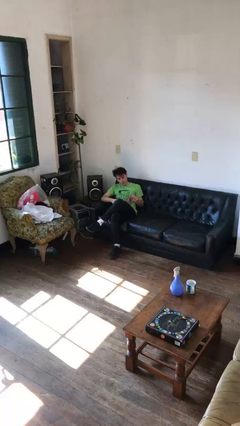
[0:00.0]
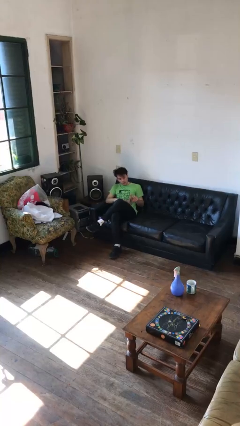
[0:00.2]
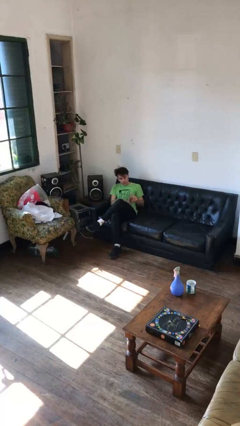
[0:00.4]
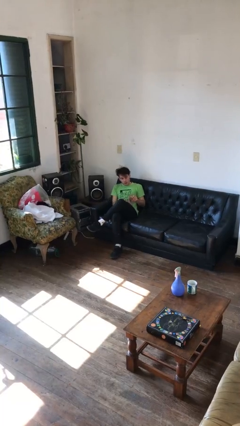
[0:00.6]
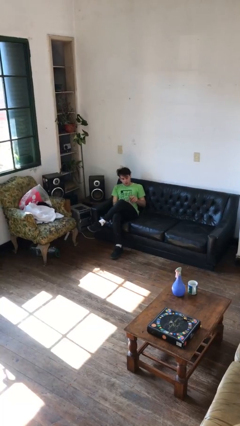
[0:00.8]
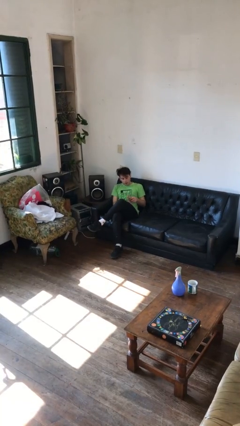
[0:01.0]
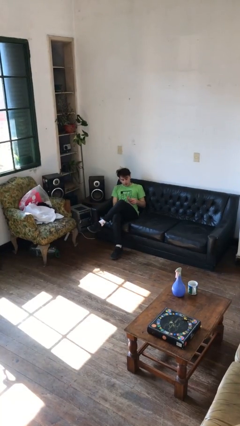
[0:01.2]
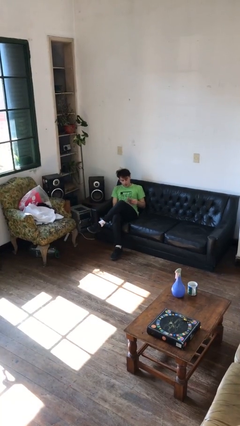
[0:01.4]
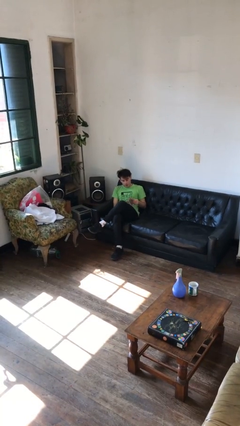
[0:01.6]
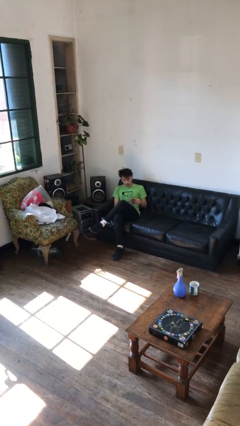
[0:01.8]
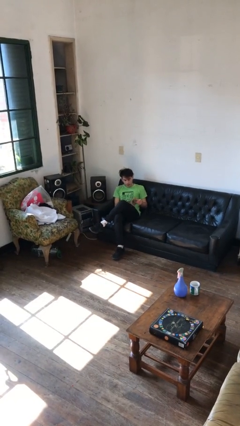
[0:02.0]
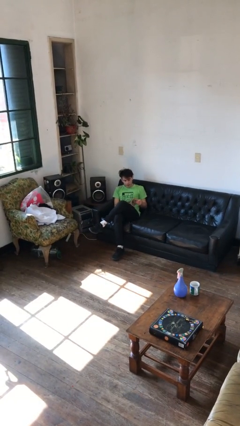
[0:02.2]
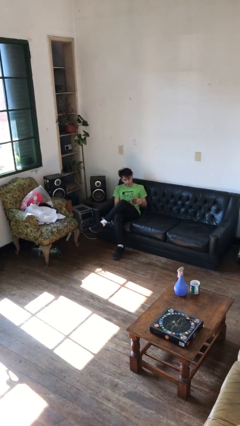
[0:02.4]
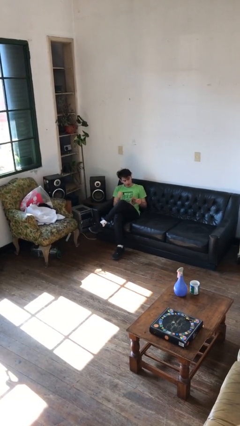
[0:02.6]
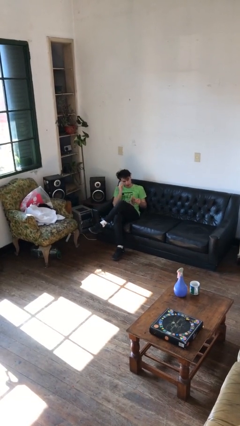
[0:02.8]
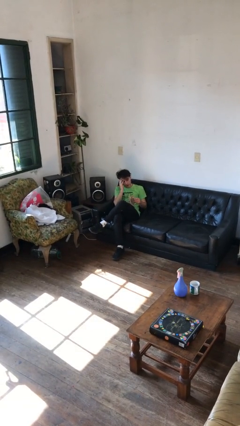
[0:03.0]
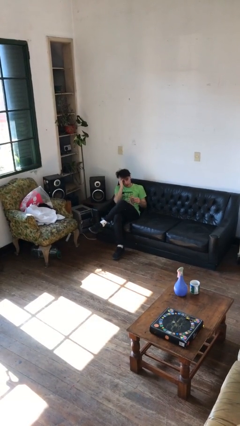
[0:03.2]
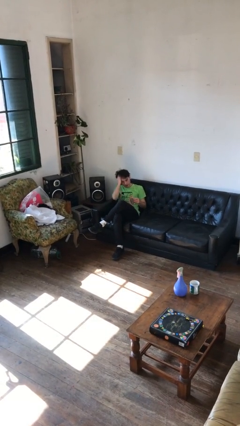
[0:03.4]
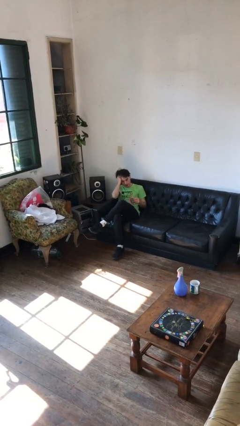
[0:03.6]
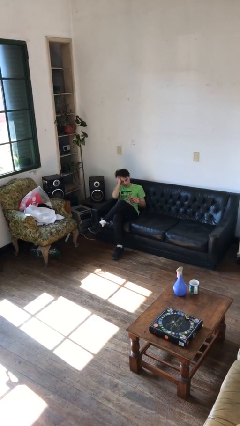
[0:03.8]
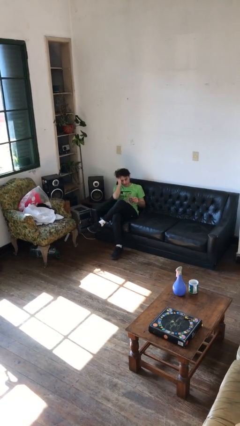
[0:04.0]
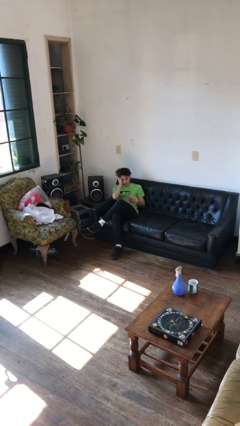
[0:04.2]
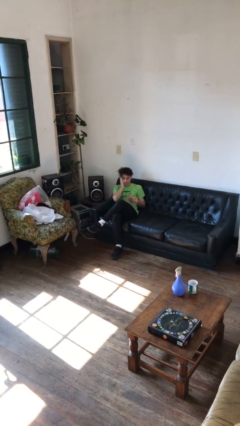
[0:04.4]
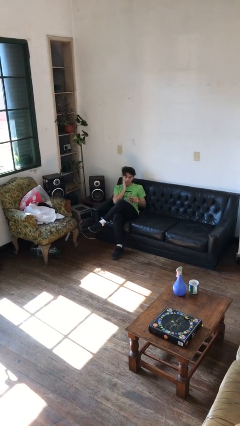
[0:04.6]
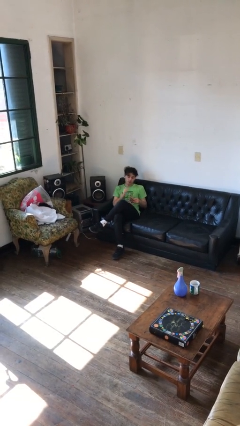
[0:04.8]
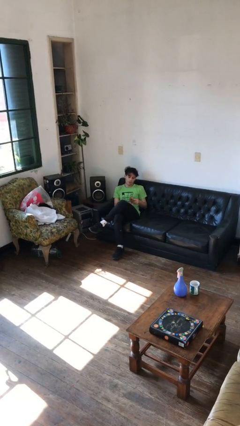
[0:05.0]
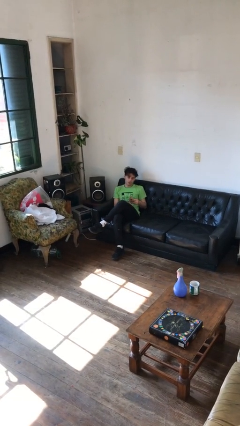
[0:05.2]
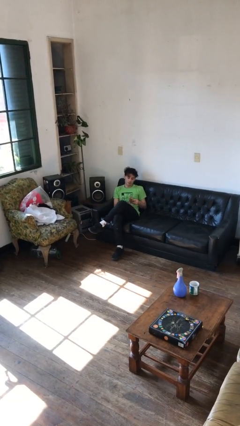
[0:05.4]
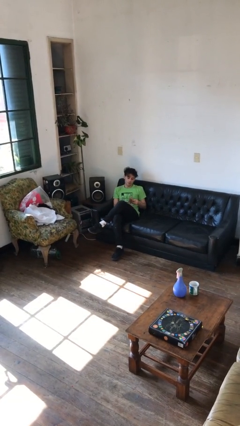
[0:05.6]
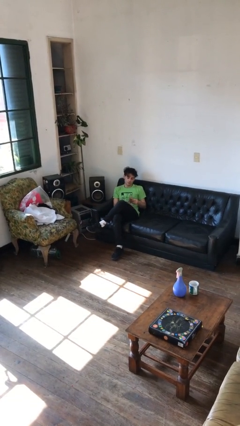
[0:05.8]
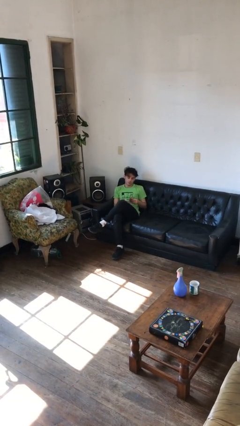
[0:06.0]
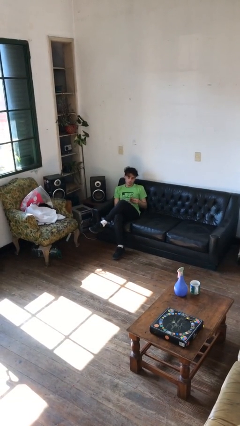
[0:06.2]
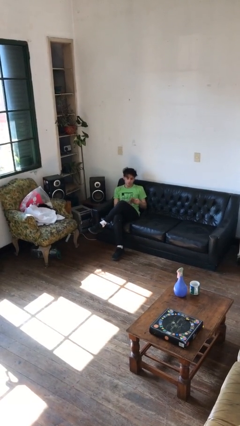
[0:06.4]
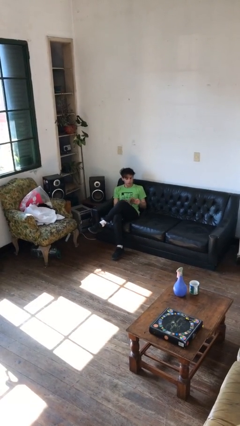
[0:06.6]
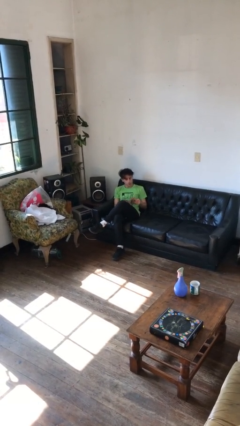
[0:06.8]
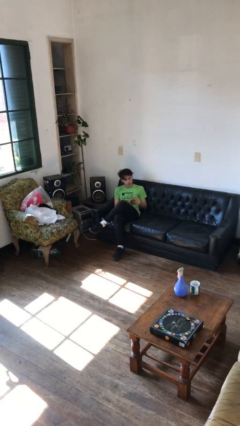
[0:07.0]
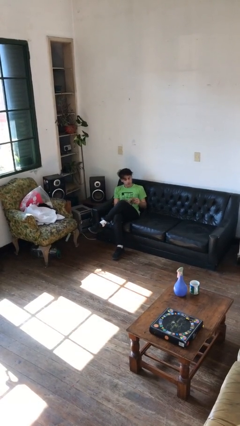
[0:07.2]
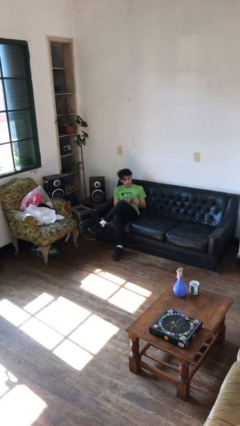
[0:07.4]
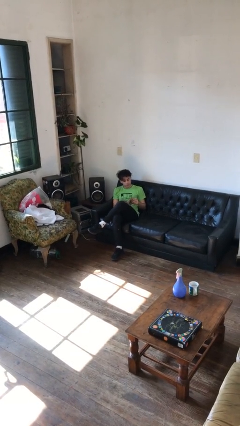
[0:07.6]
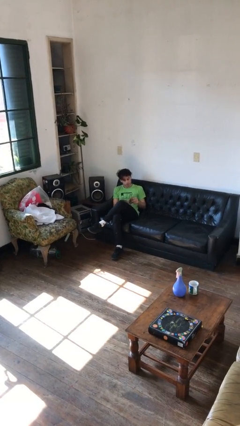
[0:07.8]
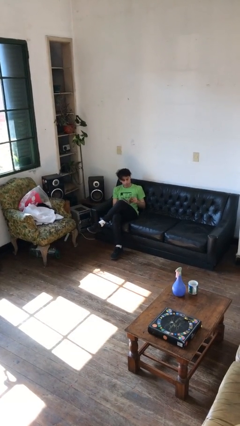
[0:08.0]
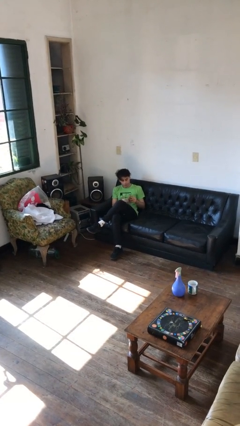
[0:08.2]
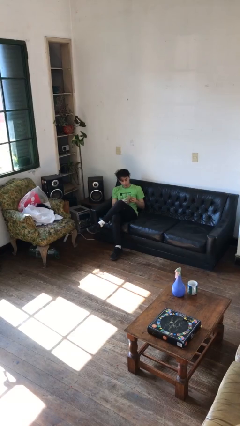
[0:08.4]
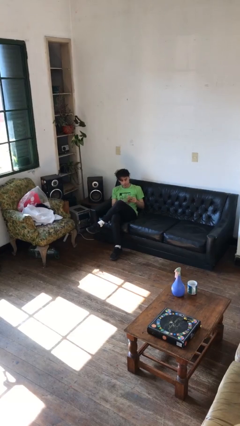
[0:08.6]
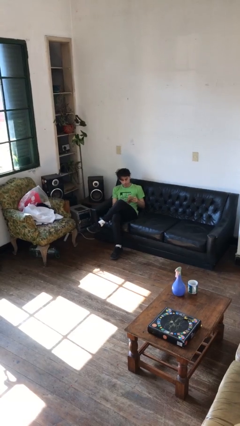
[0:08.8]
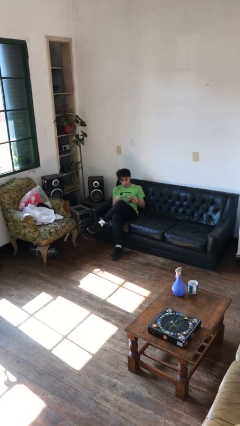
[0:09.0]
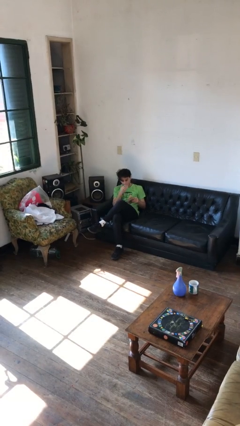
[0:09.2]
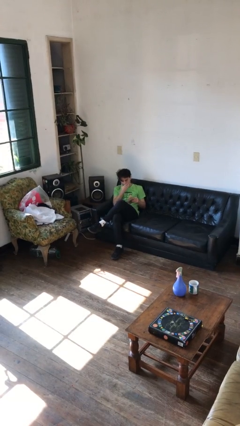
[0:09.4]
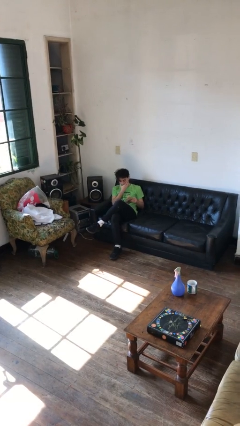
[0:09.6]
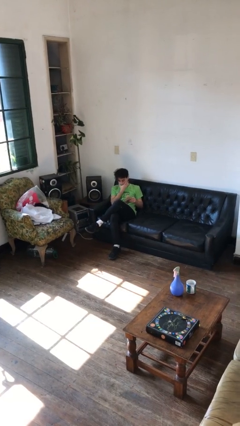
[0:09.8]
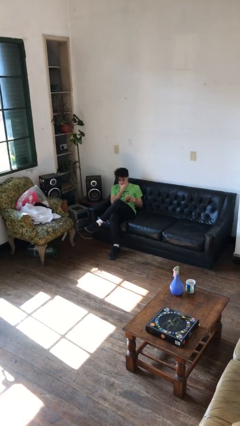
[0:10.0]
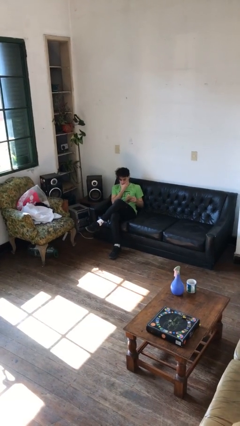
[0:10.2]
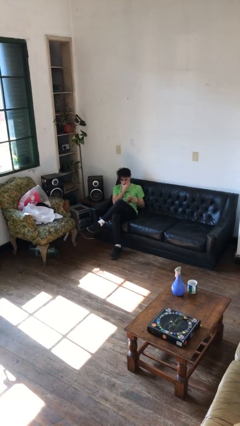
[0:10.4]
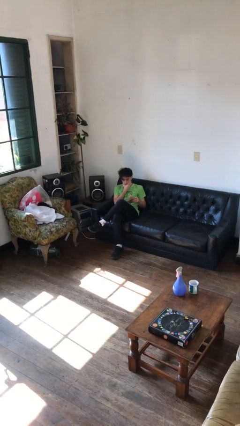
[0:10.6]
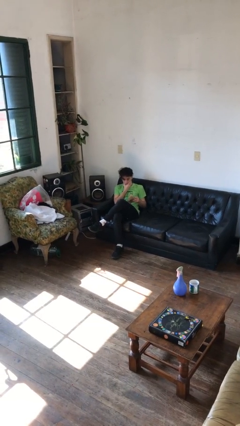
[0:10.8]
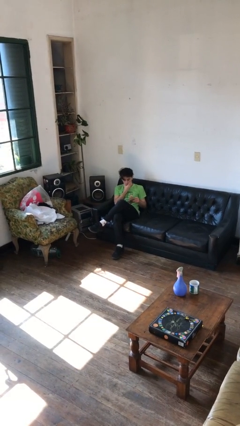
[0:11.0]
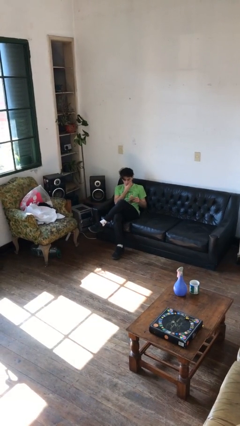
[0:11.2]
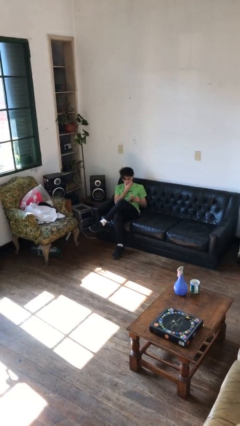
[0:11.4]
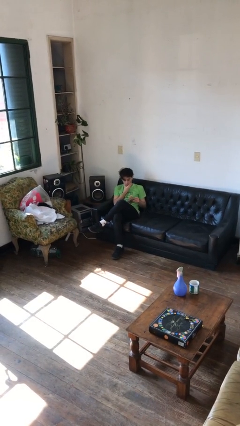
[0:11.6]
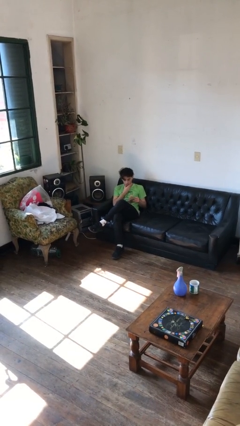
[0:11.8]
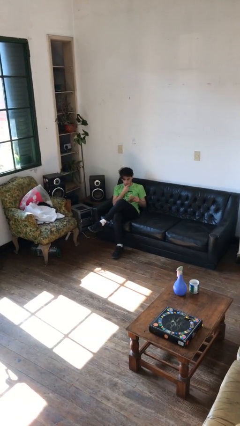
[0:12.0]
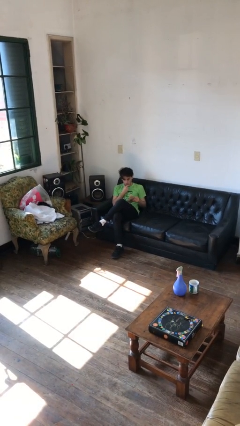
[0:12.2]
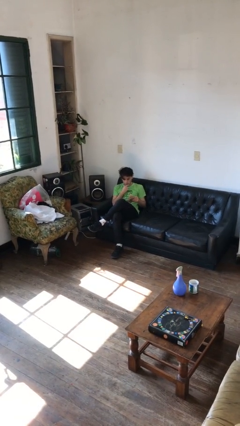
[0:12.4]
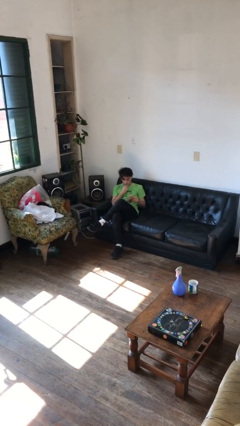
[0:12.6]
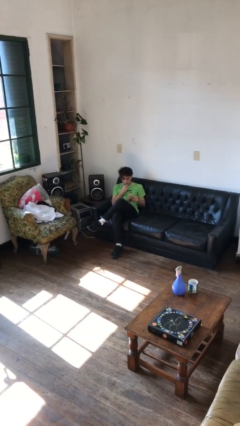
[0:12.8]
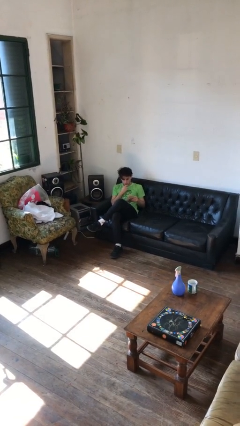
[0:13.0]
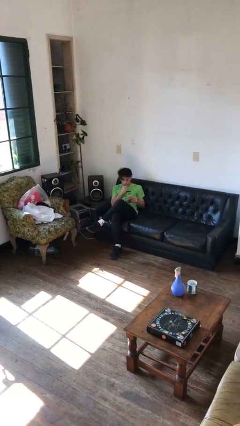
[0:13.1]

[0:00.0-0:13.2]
person reads document

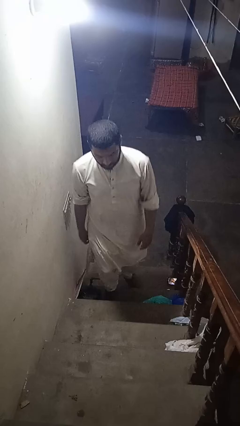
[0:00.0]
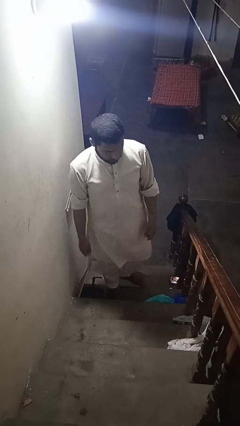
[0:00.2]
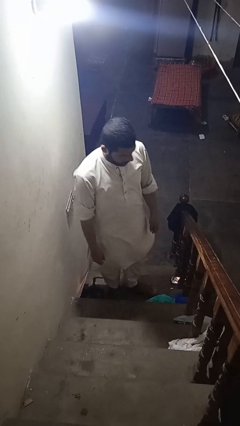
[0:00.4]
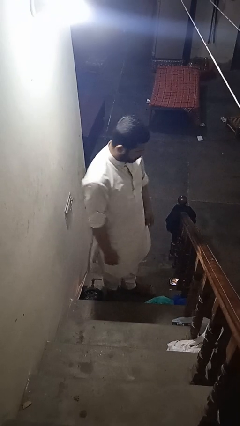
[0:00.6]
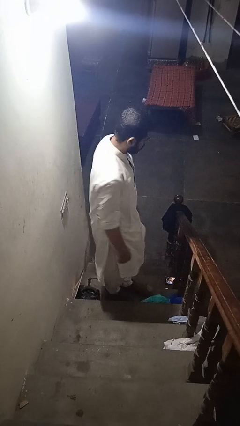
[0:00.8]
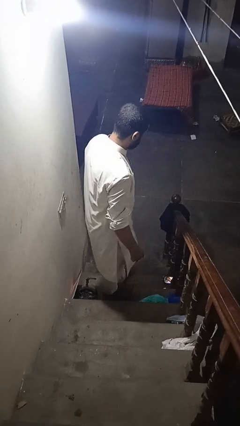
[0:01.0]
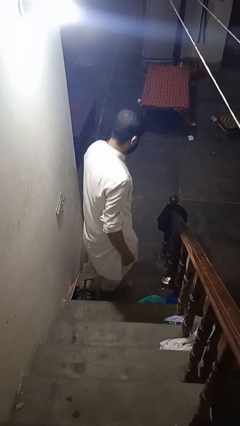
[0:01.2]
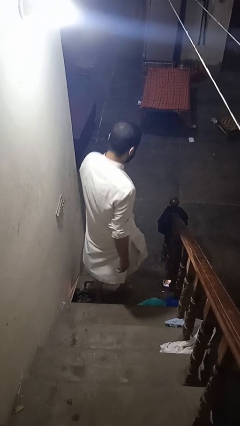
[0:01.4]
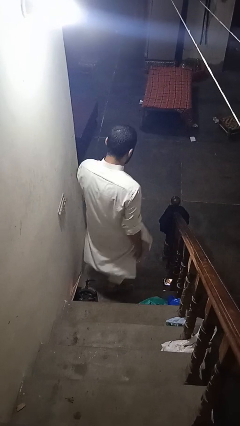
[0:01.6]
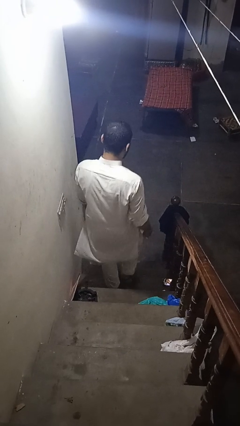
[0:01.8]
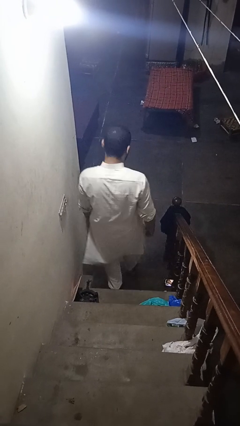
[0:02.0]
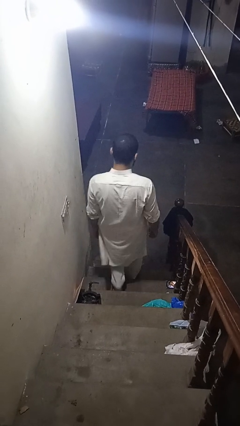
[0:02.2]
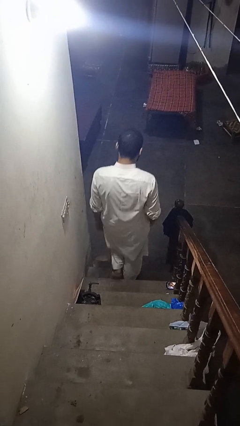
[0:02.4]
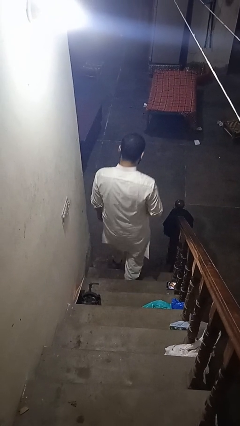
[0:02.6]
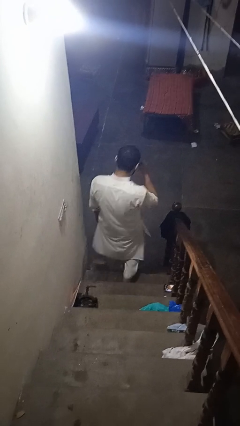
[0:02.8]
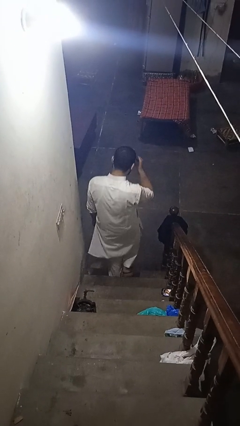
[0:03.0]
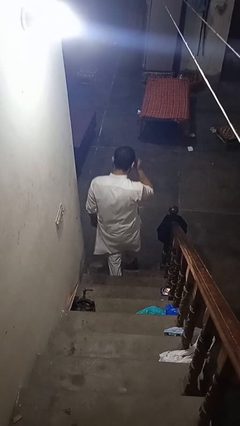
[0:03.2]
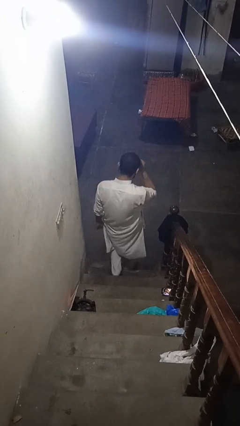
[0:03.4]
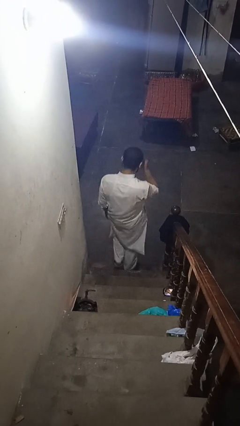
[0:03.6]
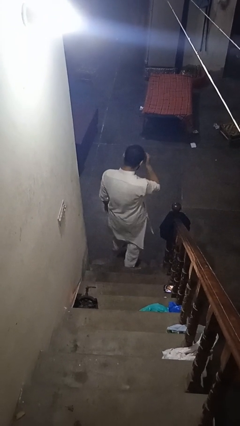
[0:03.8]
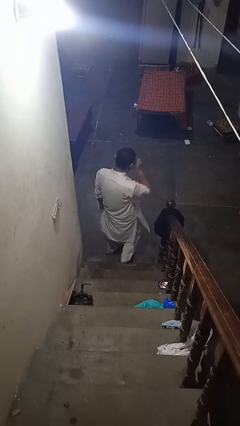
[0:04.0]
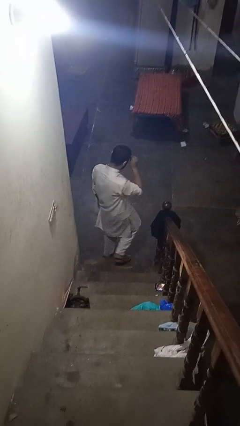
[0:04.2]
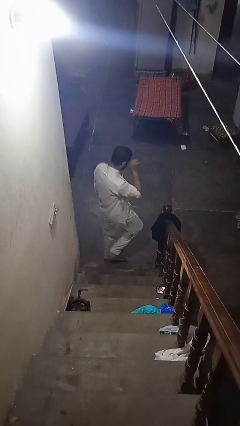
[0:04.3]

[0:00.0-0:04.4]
person climbs down stairs

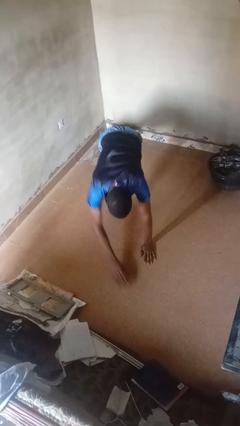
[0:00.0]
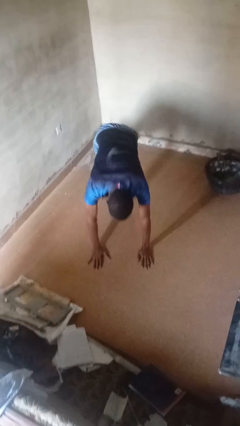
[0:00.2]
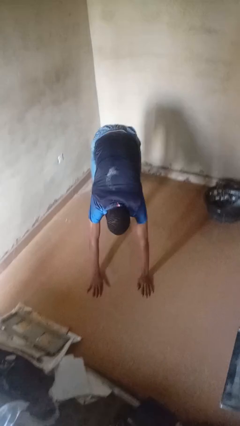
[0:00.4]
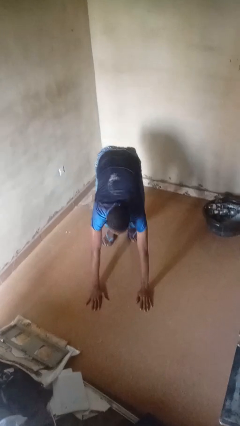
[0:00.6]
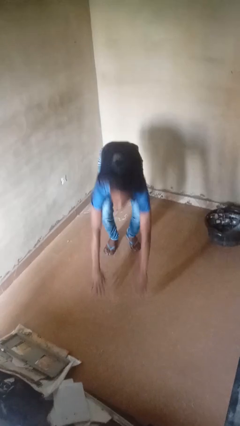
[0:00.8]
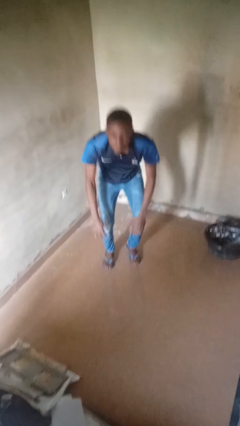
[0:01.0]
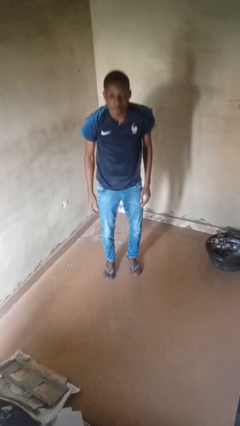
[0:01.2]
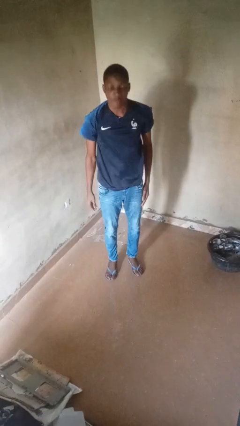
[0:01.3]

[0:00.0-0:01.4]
person stands up from floor
